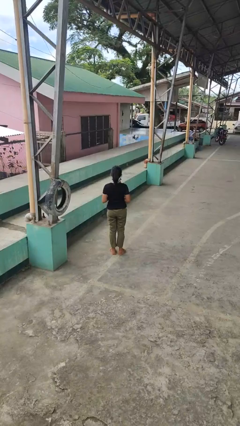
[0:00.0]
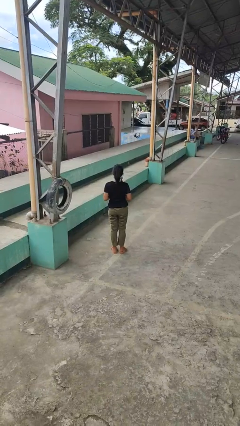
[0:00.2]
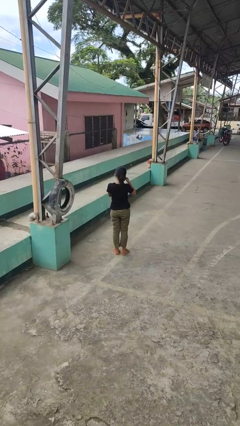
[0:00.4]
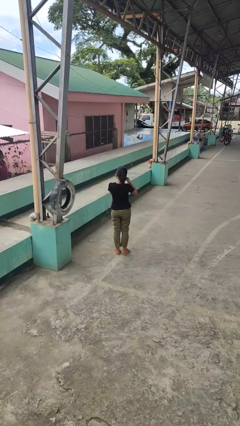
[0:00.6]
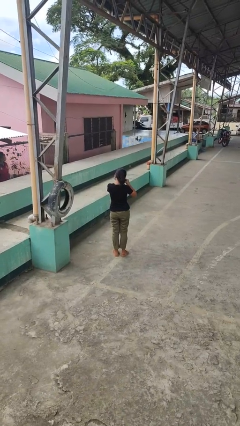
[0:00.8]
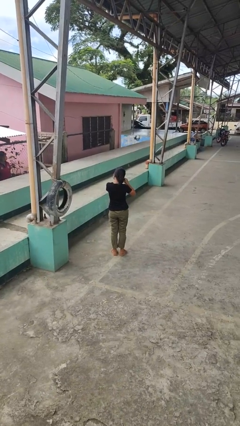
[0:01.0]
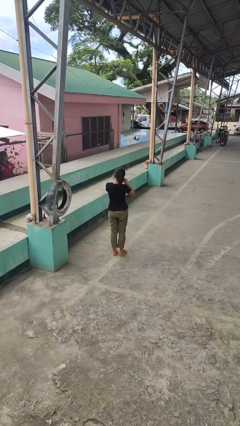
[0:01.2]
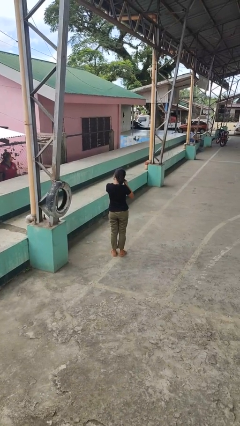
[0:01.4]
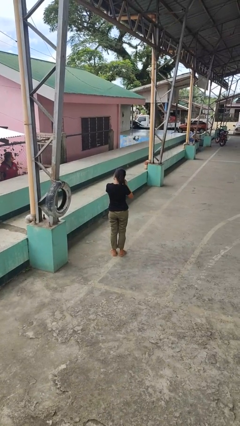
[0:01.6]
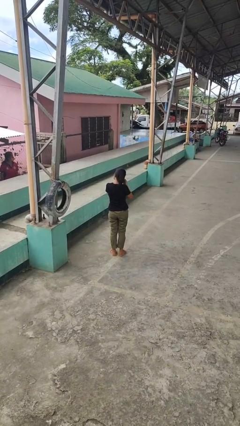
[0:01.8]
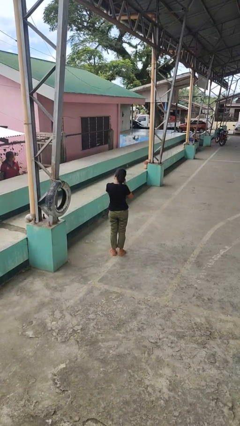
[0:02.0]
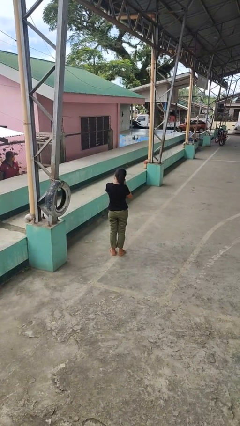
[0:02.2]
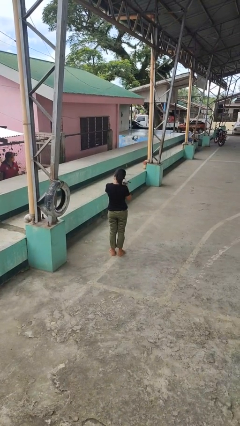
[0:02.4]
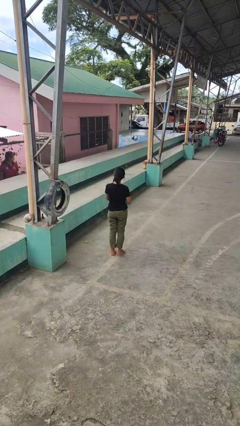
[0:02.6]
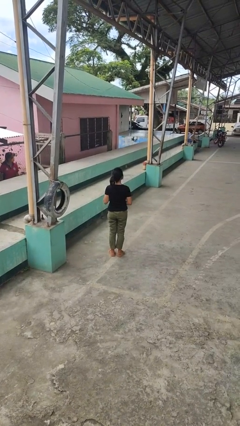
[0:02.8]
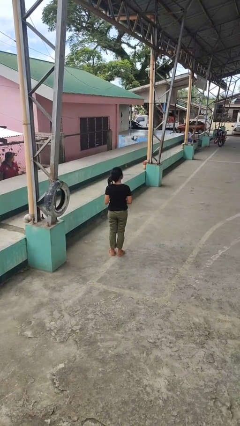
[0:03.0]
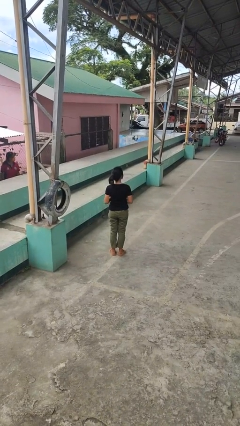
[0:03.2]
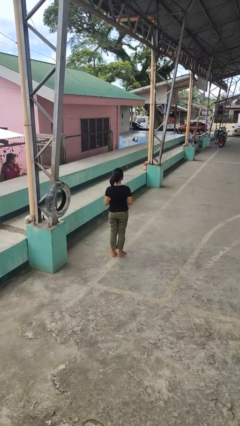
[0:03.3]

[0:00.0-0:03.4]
person takes off earrings

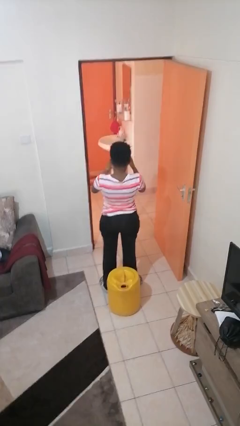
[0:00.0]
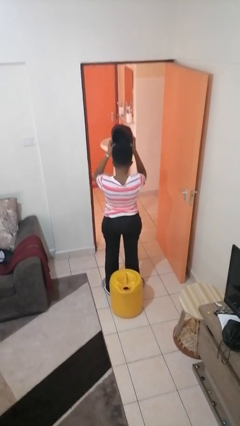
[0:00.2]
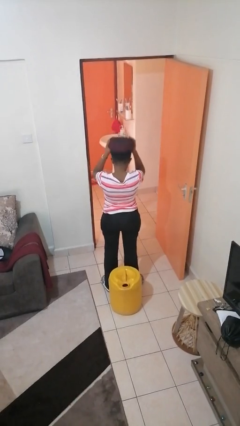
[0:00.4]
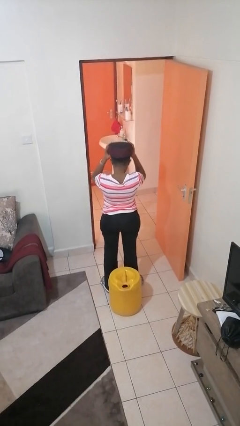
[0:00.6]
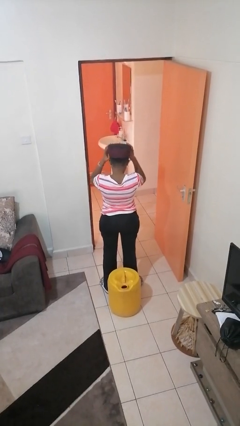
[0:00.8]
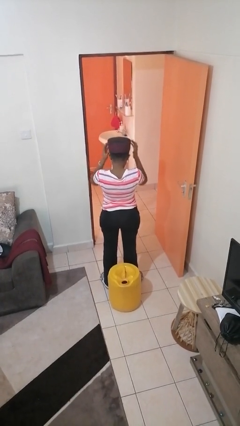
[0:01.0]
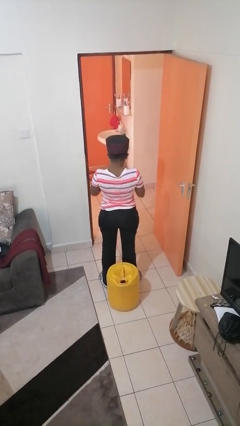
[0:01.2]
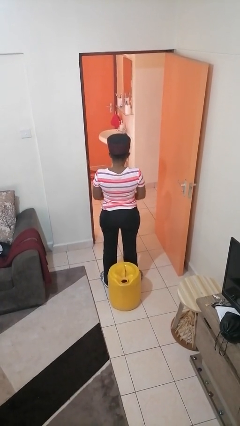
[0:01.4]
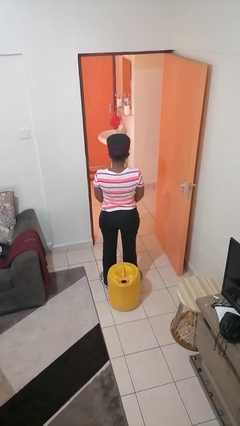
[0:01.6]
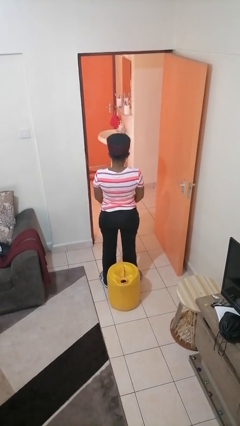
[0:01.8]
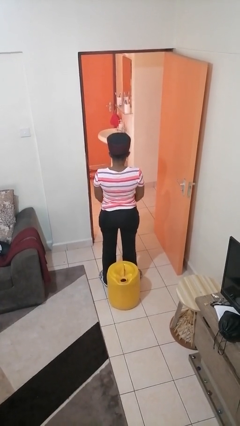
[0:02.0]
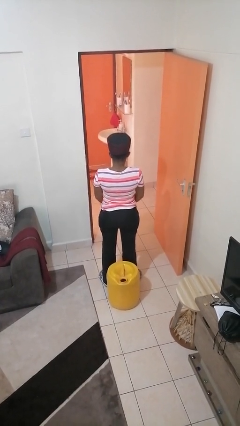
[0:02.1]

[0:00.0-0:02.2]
person puts on hat

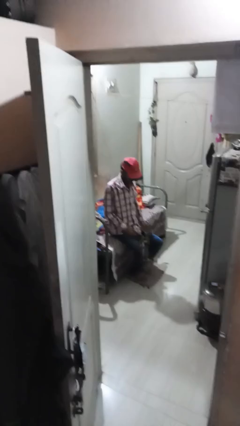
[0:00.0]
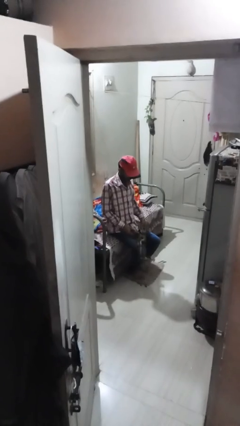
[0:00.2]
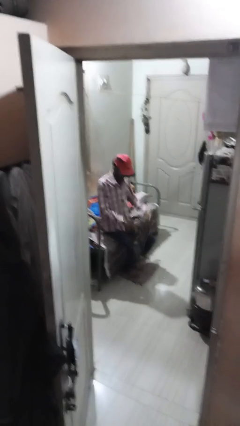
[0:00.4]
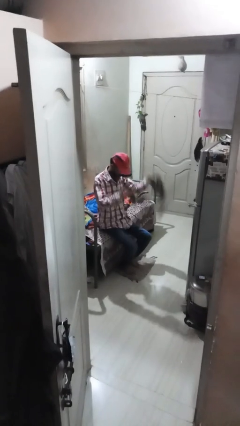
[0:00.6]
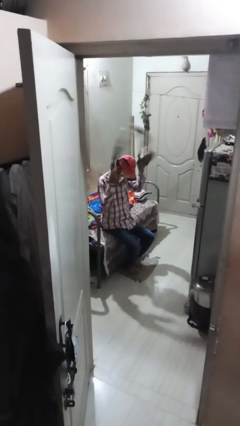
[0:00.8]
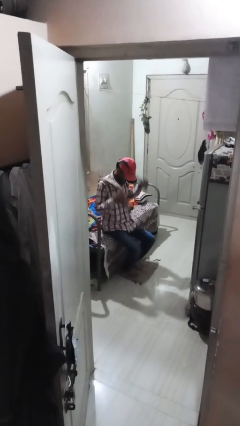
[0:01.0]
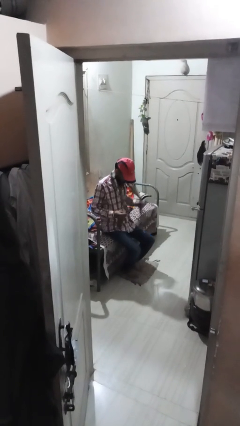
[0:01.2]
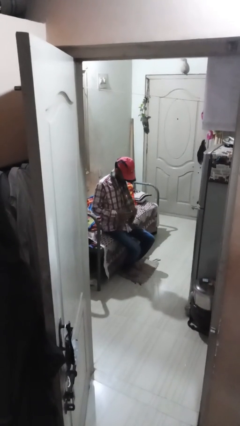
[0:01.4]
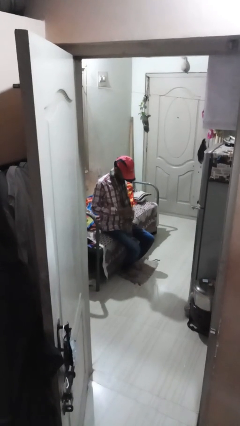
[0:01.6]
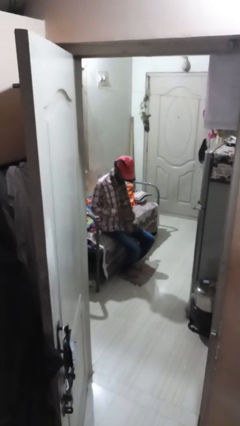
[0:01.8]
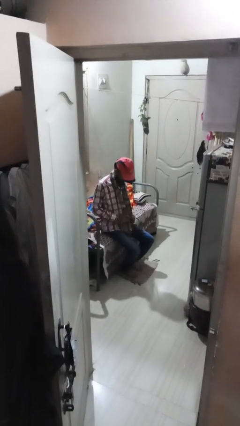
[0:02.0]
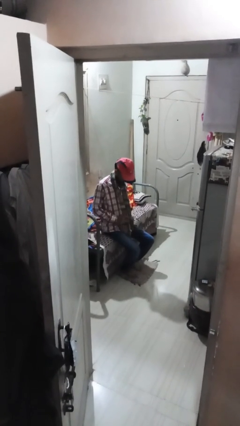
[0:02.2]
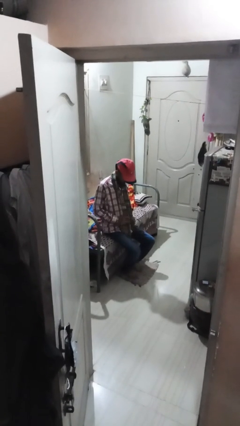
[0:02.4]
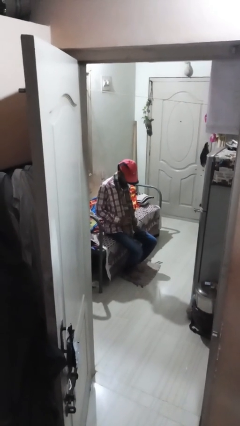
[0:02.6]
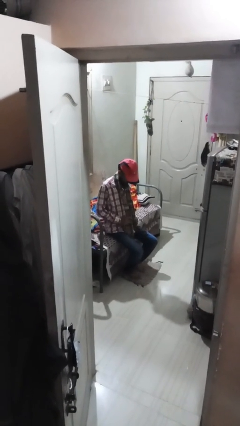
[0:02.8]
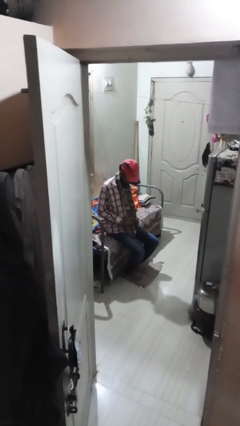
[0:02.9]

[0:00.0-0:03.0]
person puts on scarf

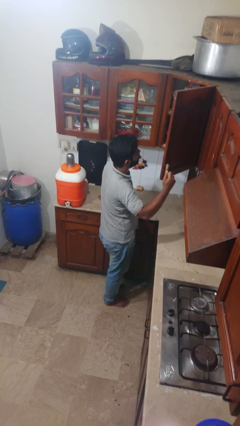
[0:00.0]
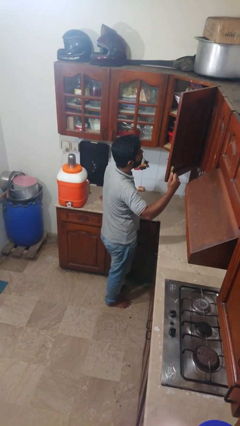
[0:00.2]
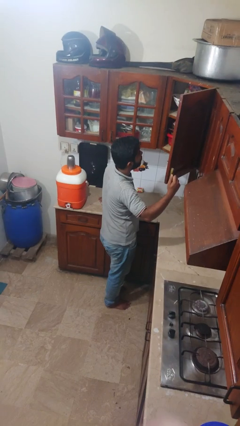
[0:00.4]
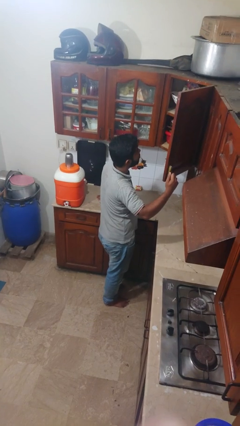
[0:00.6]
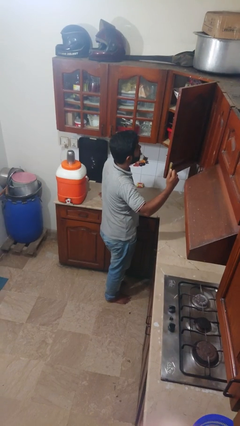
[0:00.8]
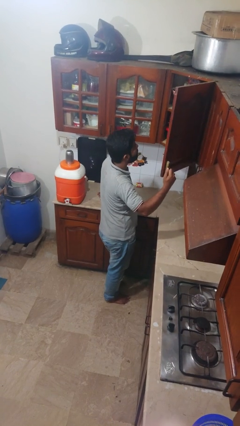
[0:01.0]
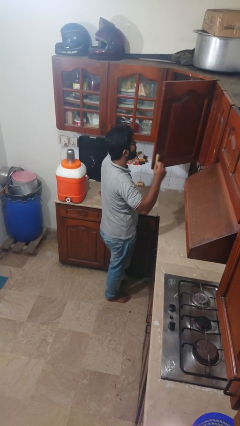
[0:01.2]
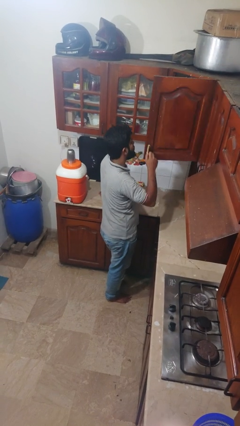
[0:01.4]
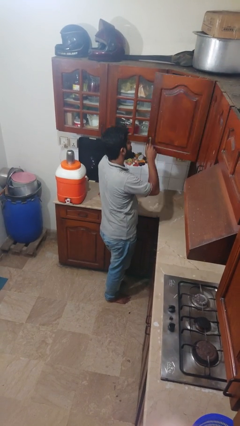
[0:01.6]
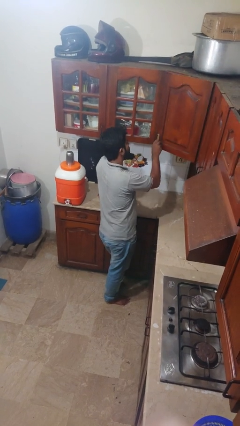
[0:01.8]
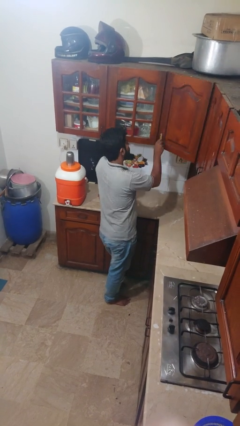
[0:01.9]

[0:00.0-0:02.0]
person closes cabinet

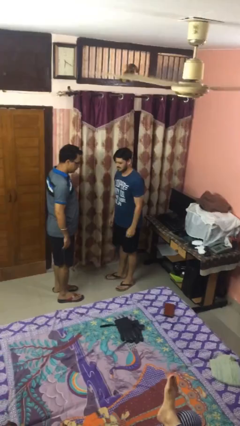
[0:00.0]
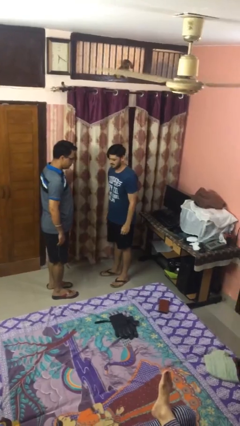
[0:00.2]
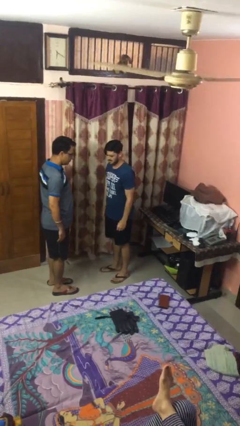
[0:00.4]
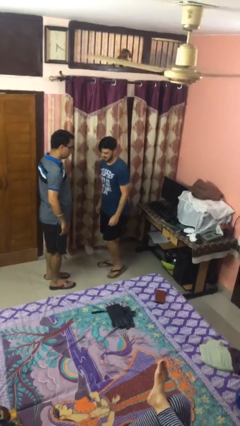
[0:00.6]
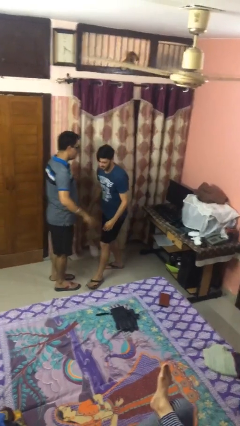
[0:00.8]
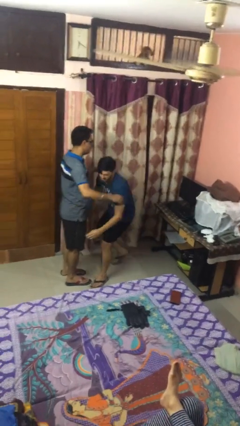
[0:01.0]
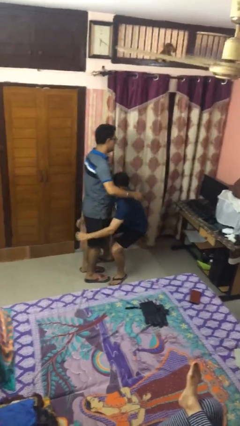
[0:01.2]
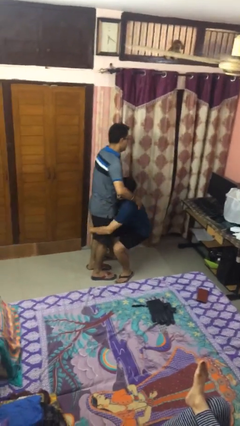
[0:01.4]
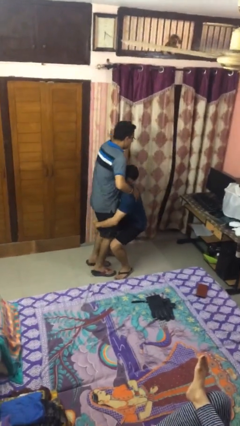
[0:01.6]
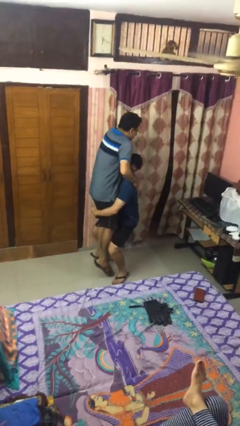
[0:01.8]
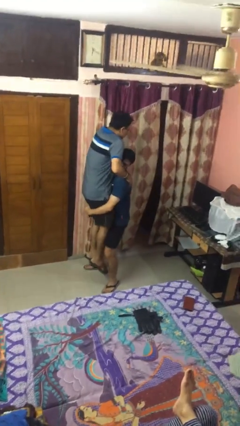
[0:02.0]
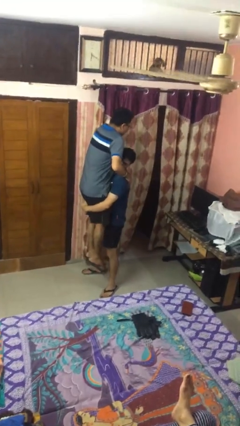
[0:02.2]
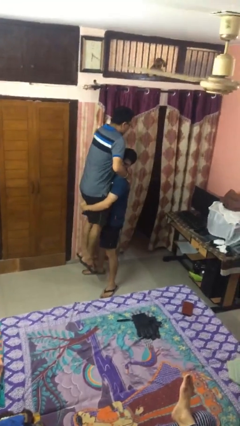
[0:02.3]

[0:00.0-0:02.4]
person picks up person

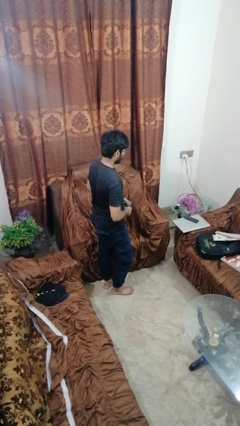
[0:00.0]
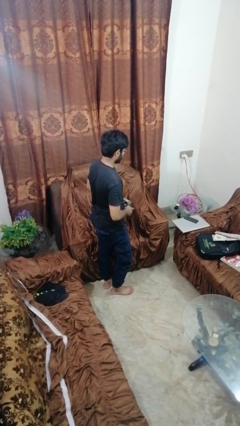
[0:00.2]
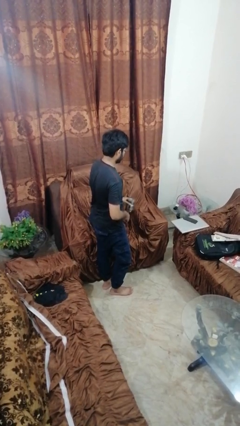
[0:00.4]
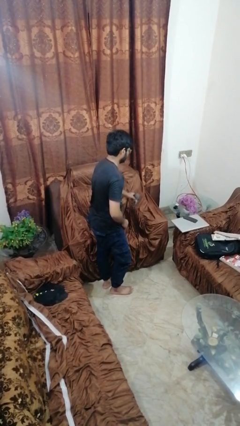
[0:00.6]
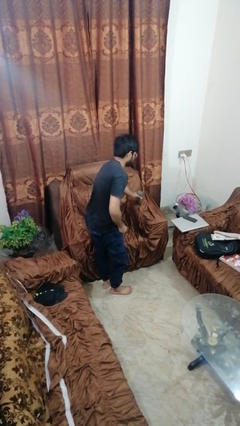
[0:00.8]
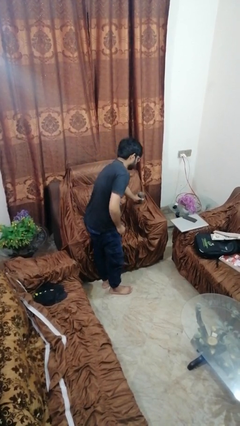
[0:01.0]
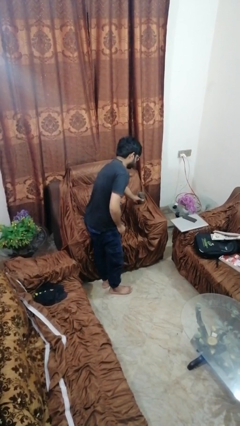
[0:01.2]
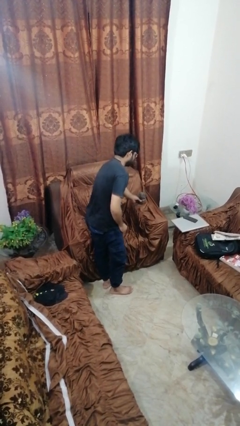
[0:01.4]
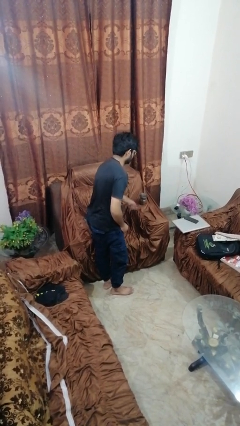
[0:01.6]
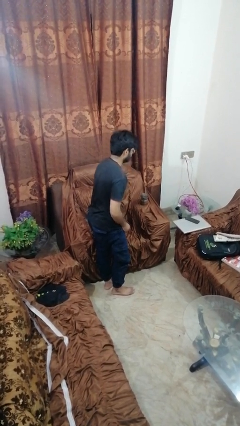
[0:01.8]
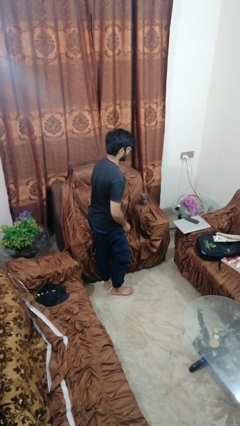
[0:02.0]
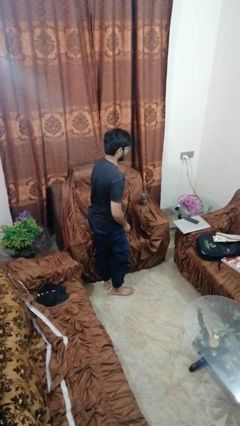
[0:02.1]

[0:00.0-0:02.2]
person puts down object on couch

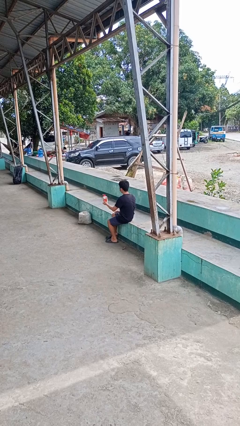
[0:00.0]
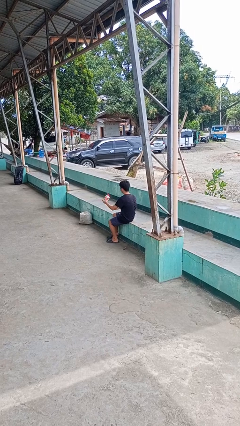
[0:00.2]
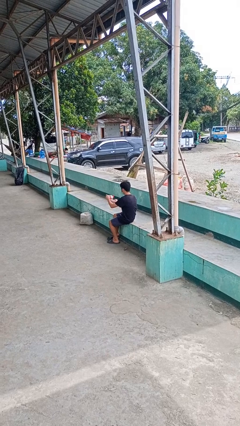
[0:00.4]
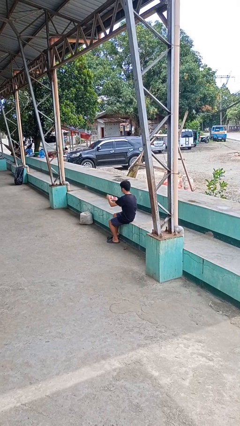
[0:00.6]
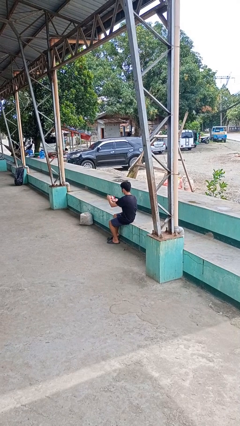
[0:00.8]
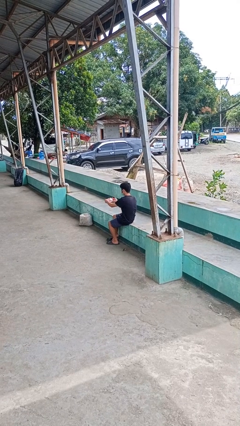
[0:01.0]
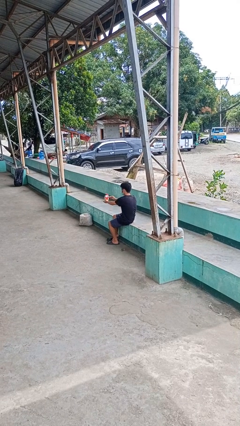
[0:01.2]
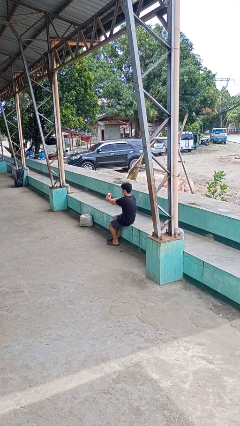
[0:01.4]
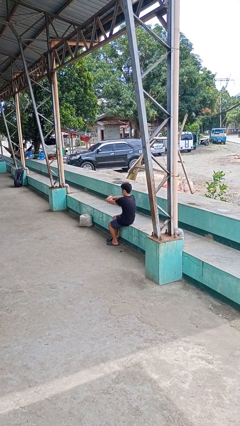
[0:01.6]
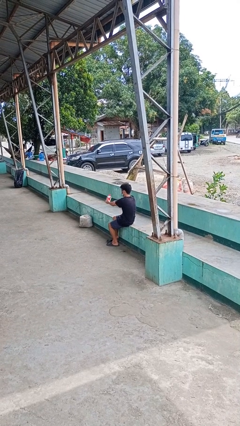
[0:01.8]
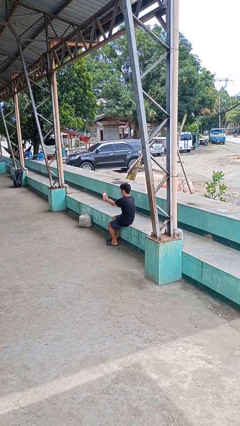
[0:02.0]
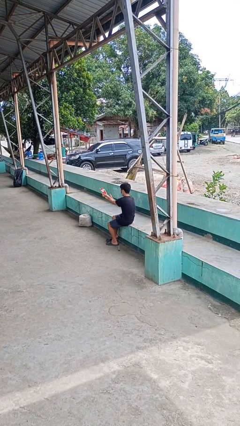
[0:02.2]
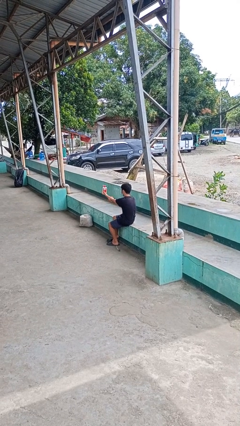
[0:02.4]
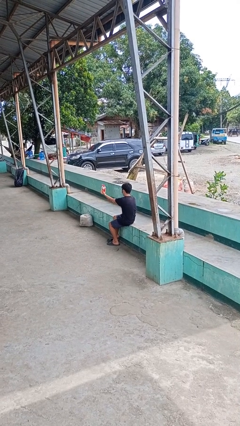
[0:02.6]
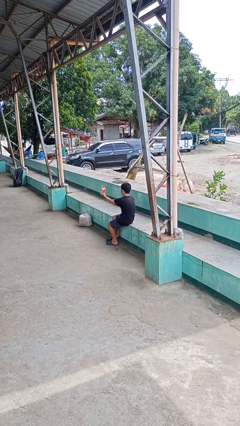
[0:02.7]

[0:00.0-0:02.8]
person applies sunscreen
